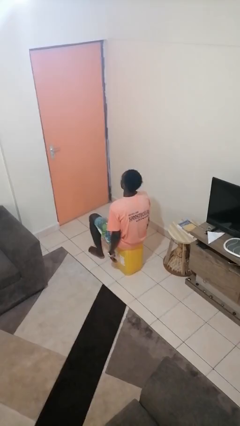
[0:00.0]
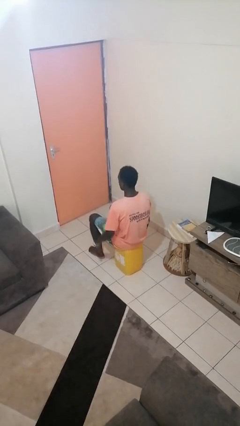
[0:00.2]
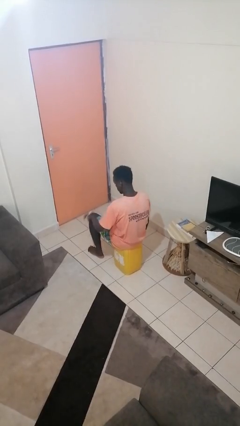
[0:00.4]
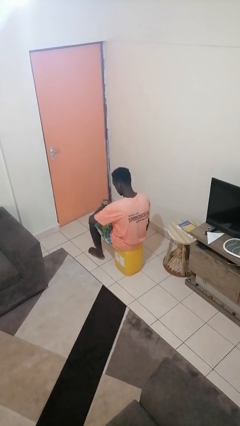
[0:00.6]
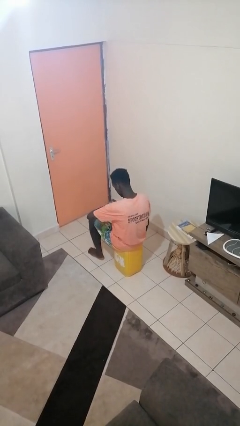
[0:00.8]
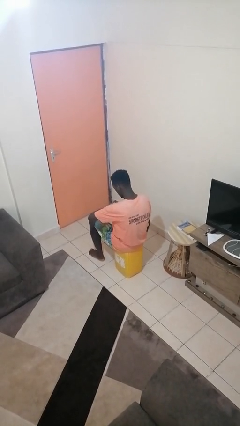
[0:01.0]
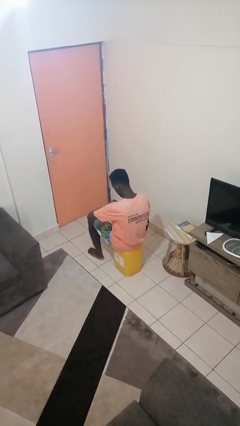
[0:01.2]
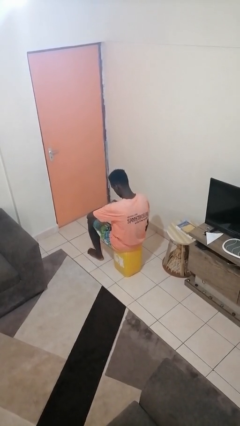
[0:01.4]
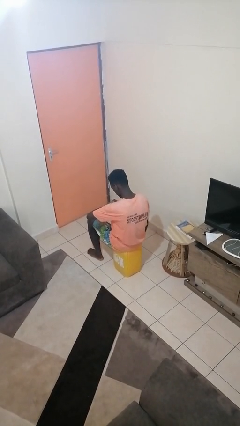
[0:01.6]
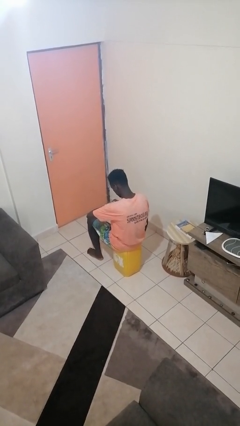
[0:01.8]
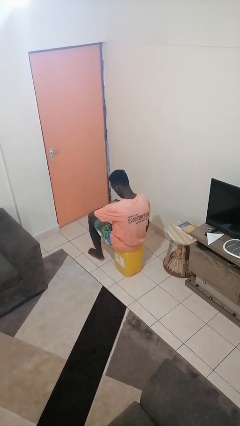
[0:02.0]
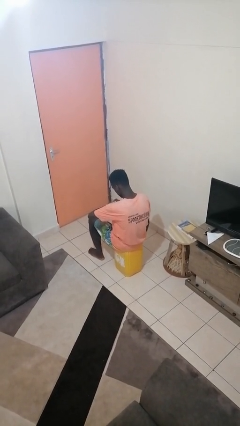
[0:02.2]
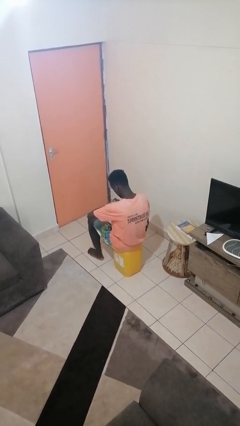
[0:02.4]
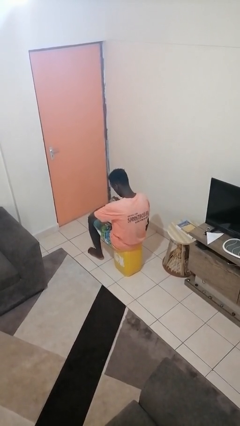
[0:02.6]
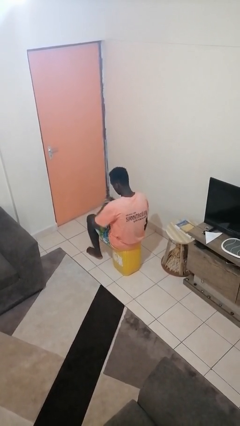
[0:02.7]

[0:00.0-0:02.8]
person looks at wristwatch

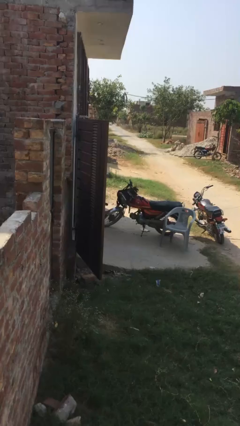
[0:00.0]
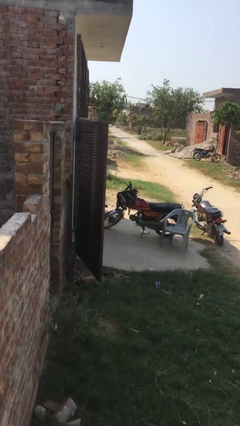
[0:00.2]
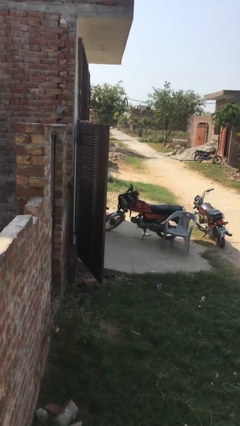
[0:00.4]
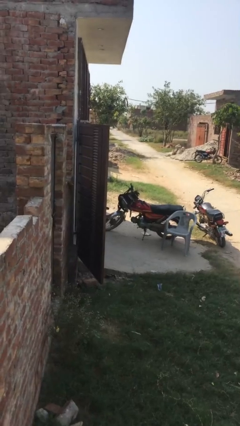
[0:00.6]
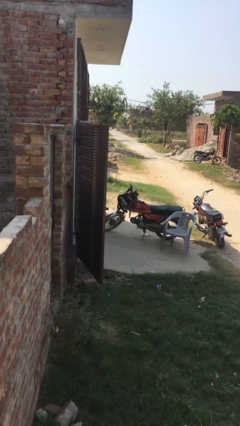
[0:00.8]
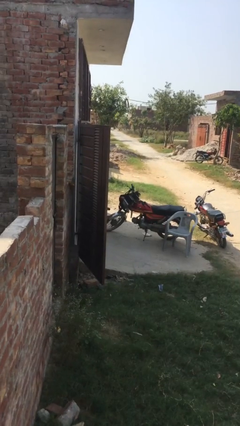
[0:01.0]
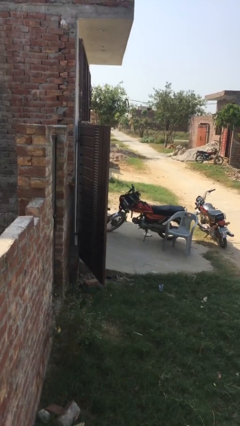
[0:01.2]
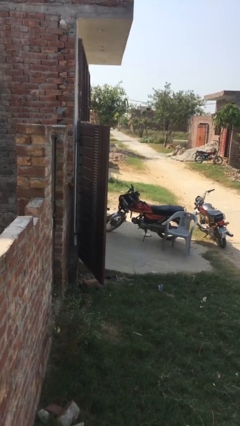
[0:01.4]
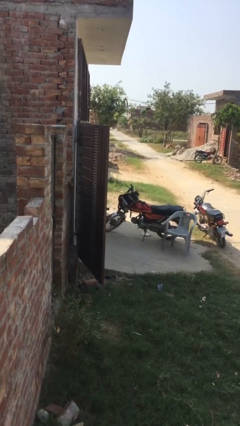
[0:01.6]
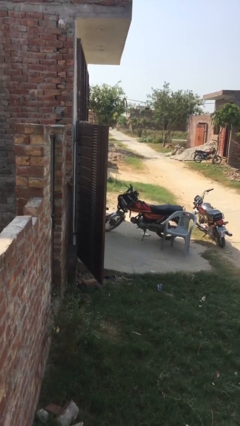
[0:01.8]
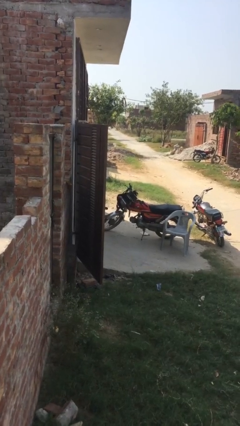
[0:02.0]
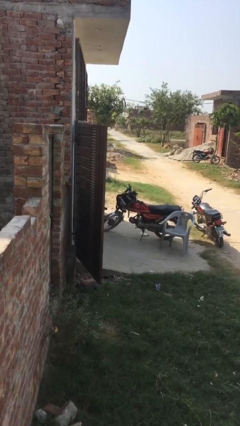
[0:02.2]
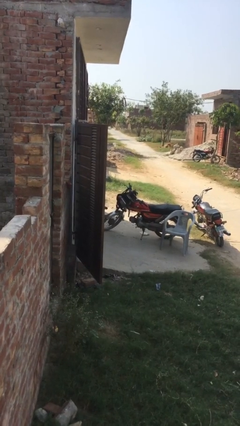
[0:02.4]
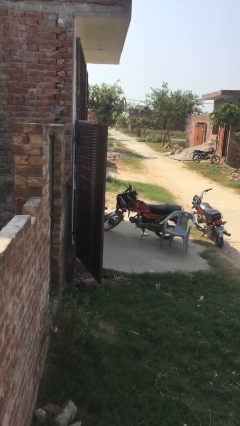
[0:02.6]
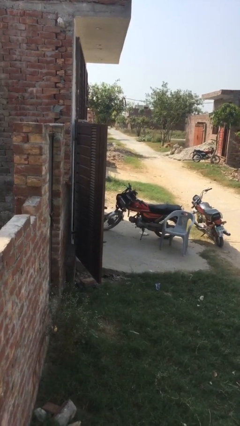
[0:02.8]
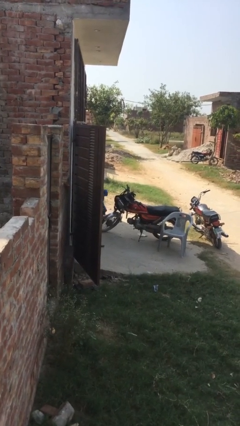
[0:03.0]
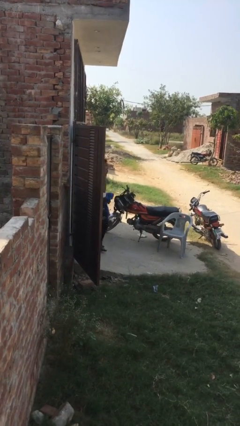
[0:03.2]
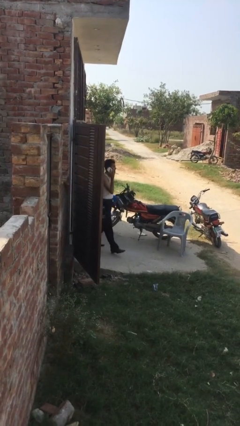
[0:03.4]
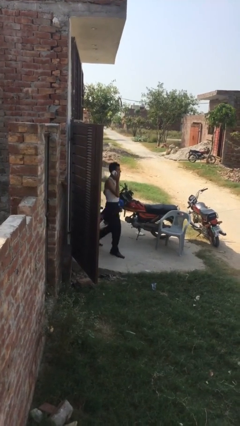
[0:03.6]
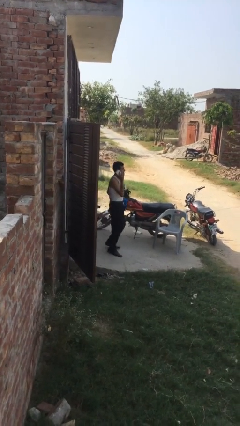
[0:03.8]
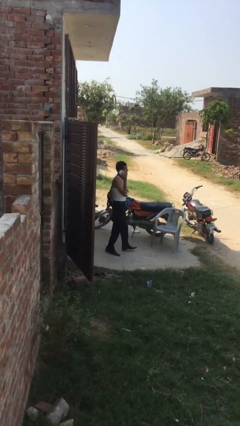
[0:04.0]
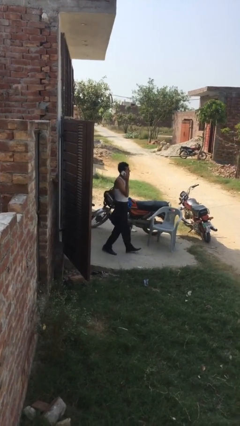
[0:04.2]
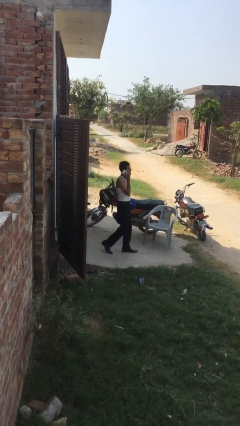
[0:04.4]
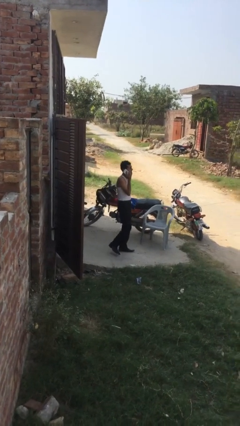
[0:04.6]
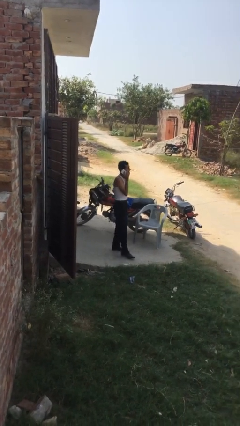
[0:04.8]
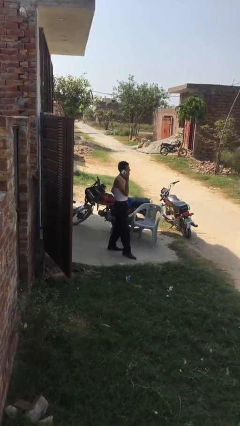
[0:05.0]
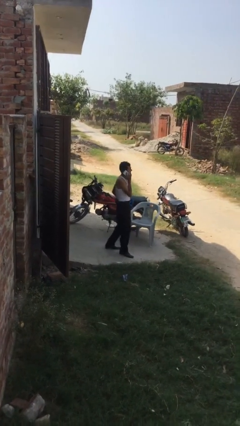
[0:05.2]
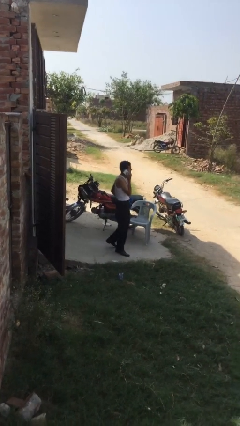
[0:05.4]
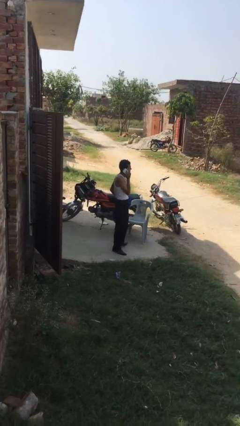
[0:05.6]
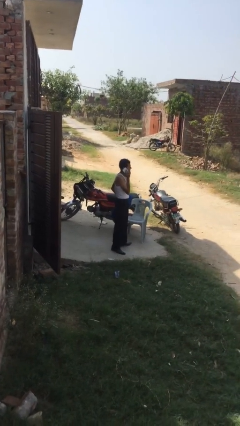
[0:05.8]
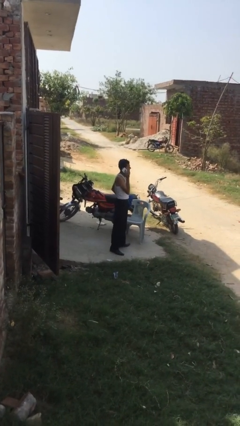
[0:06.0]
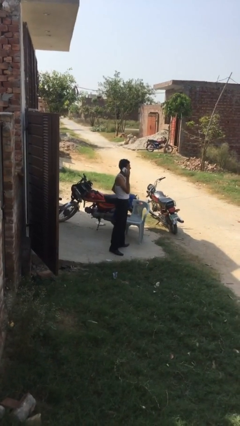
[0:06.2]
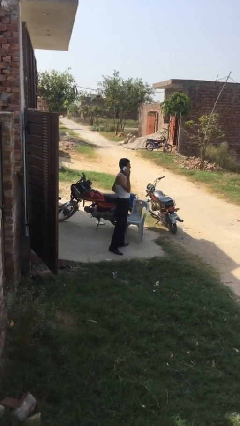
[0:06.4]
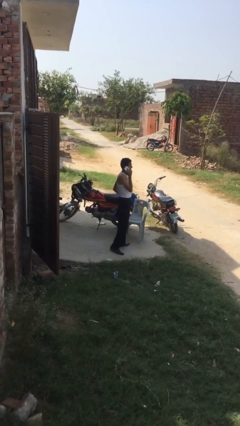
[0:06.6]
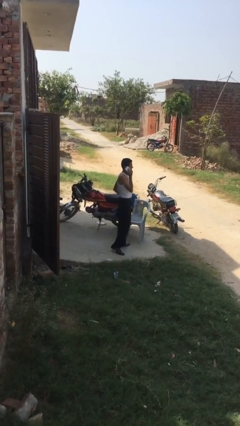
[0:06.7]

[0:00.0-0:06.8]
person enters scene through structure

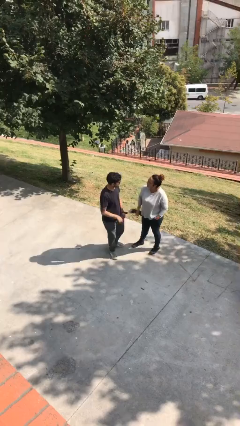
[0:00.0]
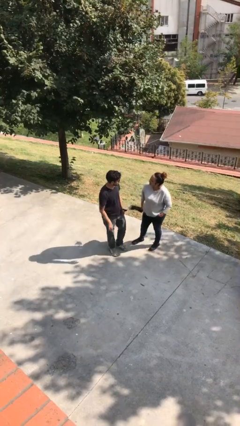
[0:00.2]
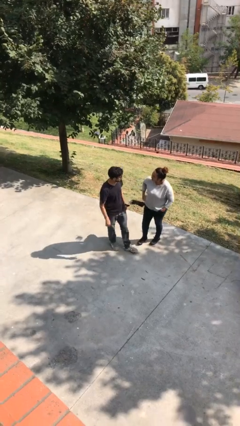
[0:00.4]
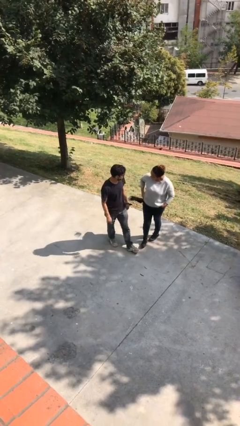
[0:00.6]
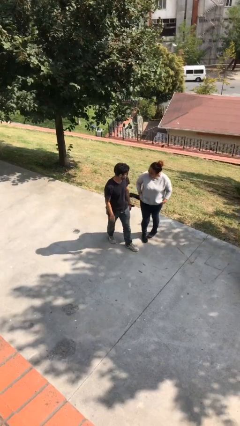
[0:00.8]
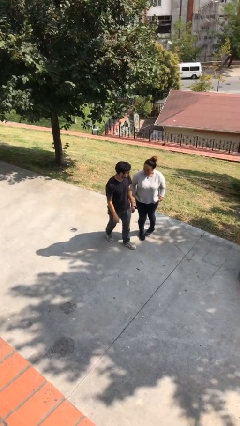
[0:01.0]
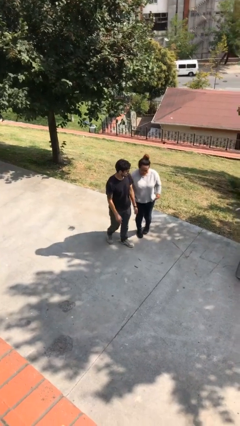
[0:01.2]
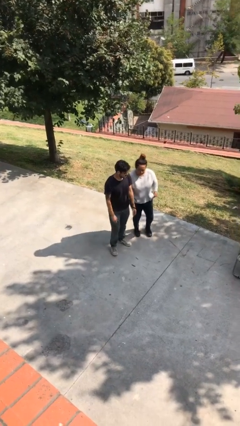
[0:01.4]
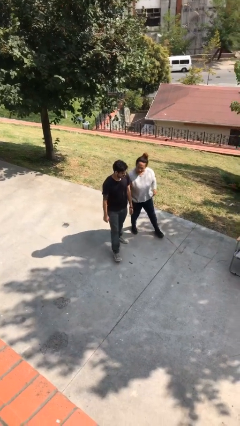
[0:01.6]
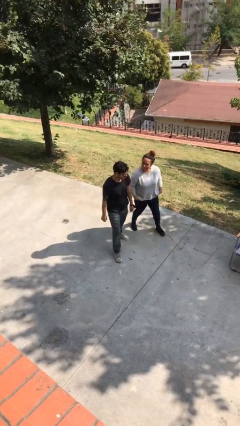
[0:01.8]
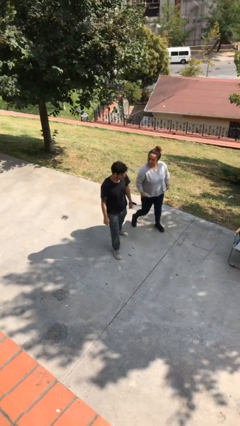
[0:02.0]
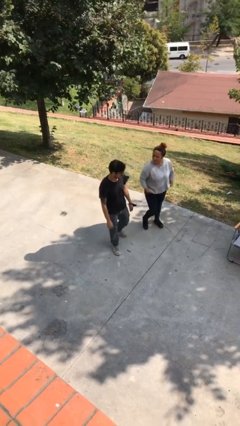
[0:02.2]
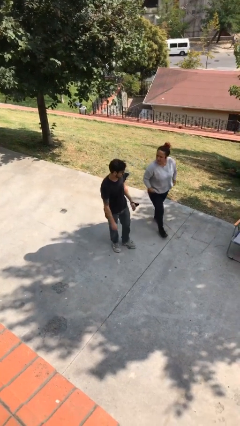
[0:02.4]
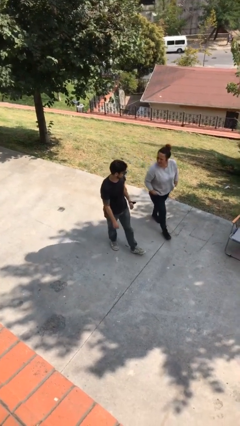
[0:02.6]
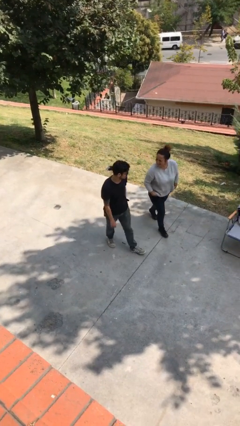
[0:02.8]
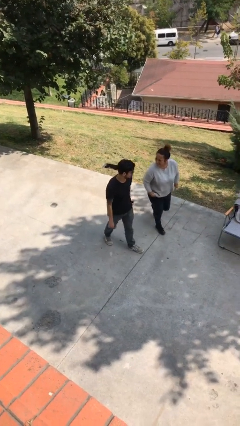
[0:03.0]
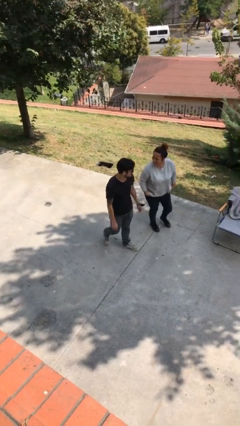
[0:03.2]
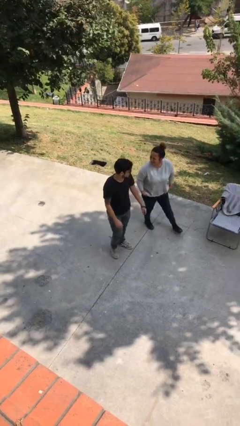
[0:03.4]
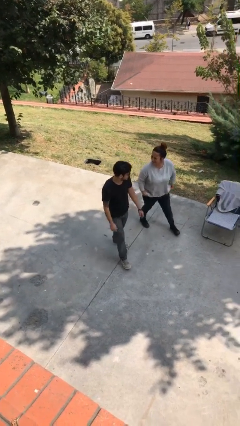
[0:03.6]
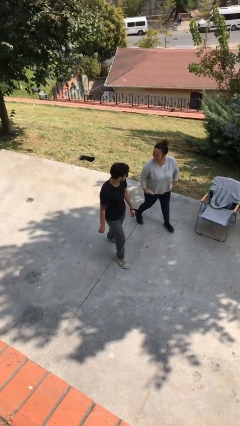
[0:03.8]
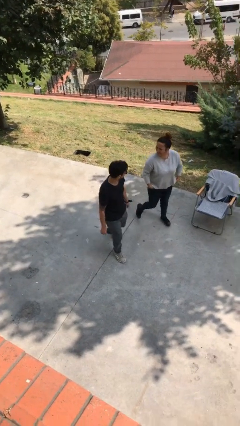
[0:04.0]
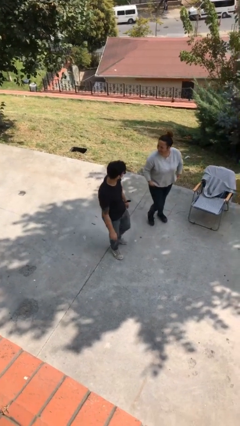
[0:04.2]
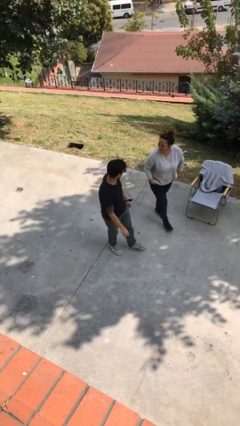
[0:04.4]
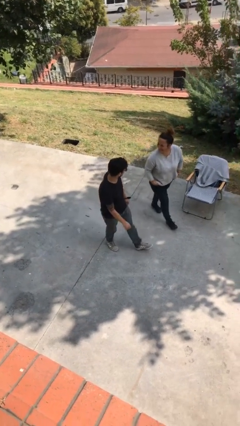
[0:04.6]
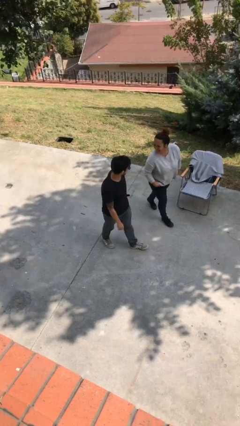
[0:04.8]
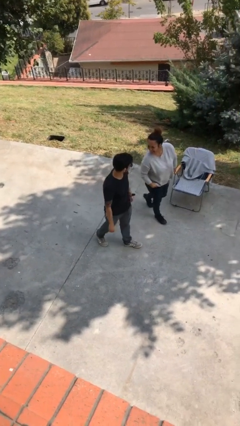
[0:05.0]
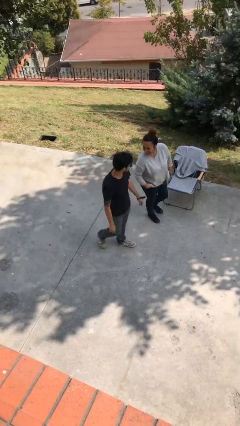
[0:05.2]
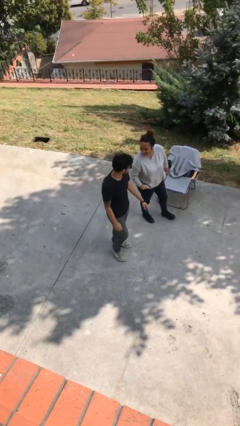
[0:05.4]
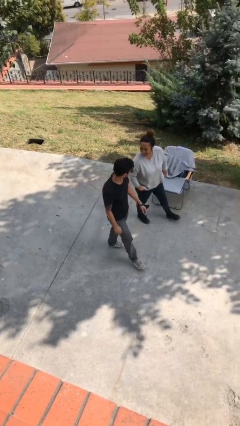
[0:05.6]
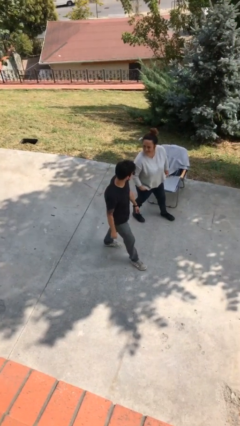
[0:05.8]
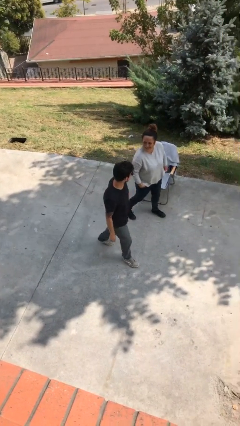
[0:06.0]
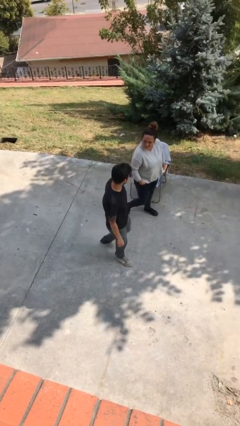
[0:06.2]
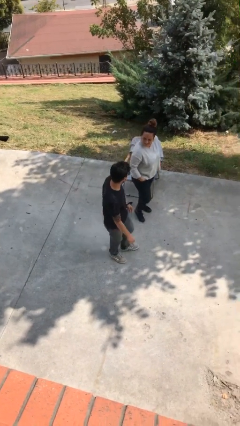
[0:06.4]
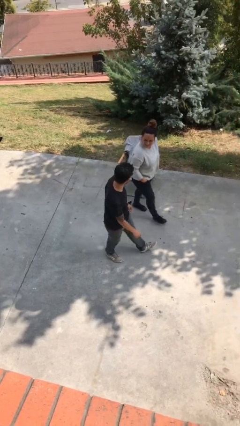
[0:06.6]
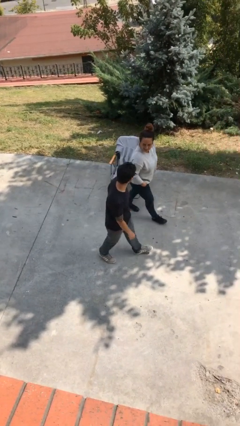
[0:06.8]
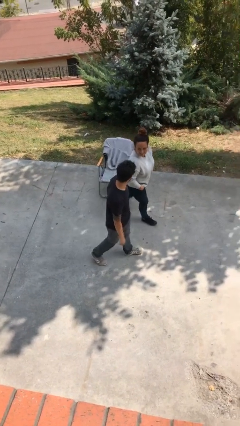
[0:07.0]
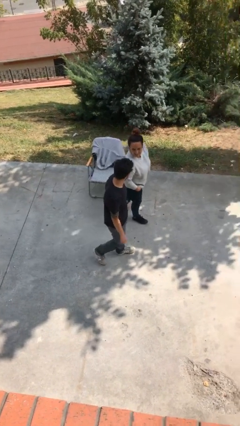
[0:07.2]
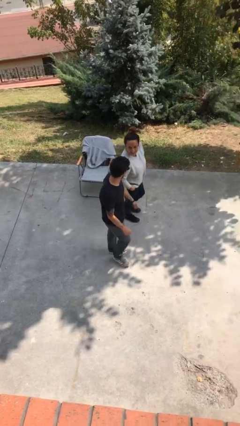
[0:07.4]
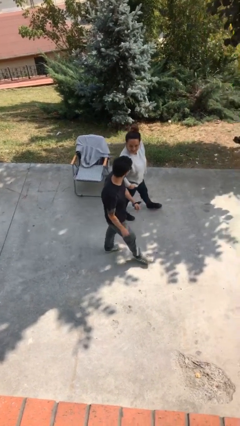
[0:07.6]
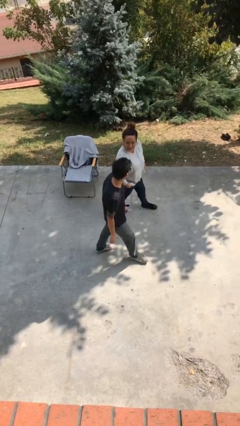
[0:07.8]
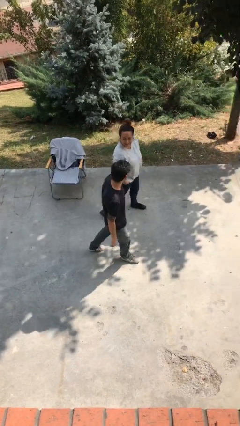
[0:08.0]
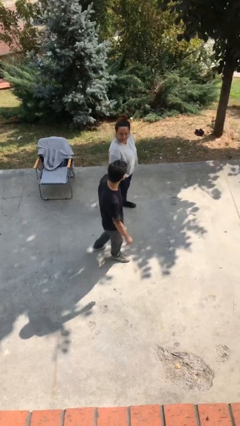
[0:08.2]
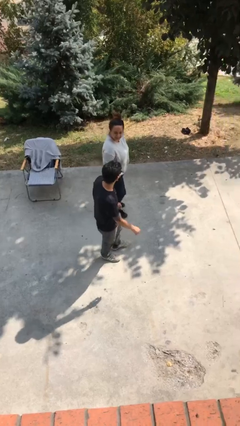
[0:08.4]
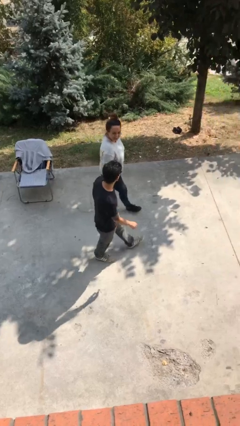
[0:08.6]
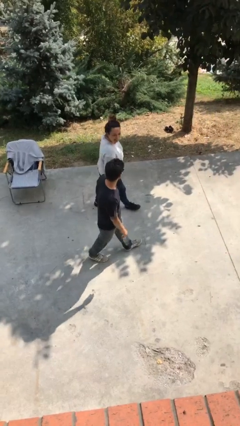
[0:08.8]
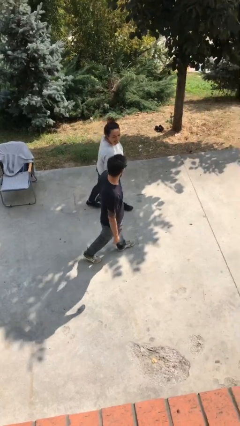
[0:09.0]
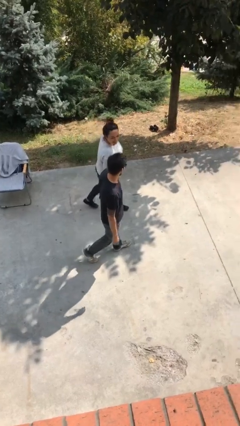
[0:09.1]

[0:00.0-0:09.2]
person talks to person
